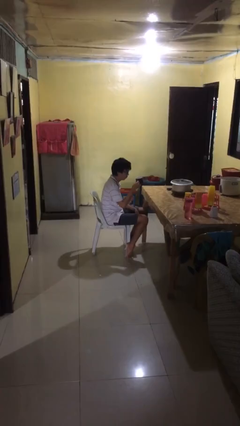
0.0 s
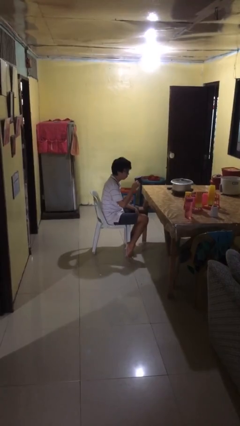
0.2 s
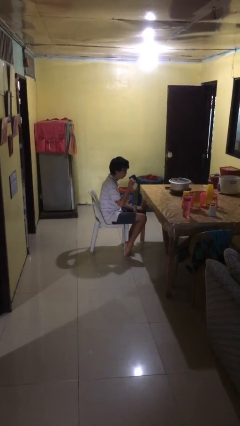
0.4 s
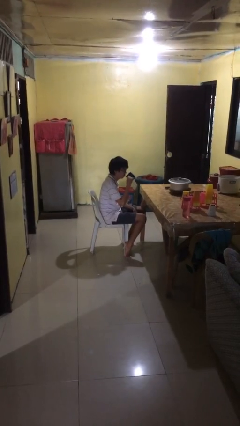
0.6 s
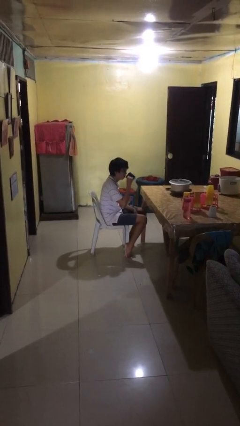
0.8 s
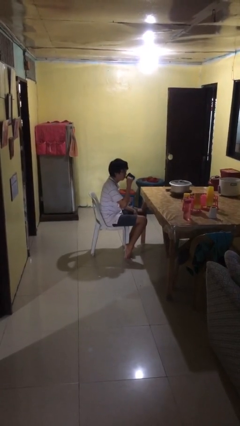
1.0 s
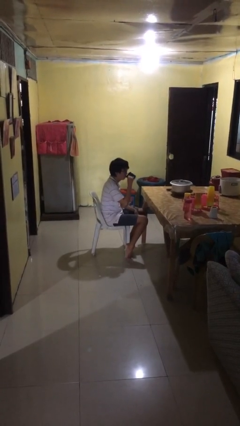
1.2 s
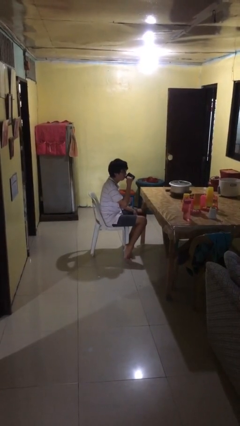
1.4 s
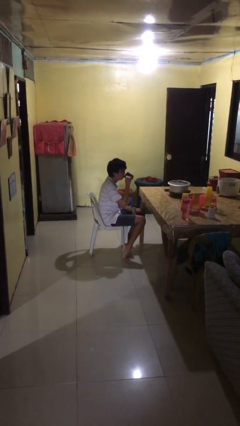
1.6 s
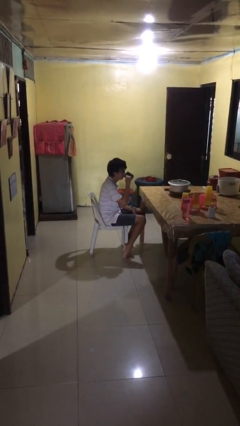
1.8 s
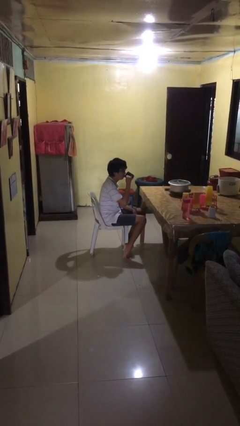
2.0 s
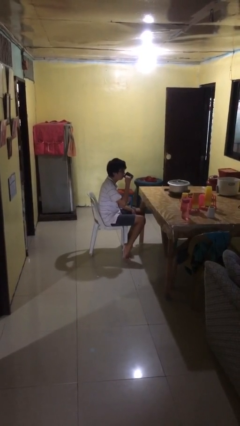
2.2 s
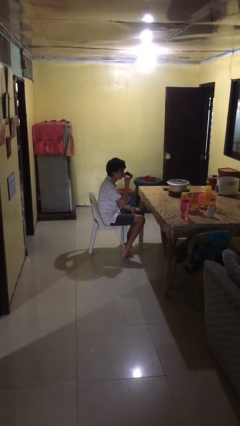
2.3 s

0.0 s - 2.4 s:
person drinks from mug

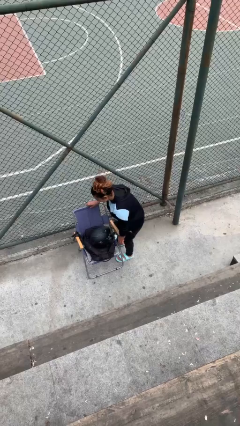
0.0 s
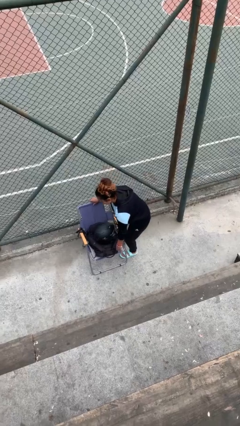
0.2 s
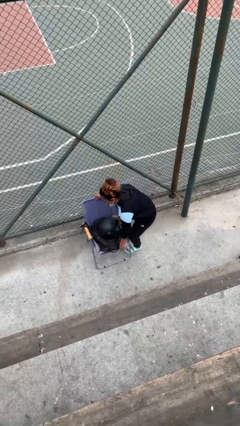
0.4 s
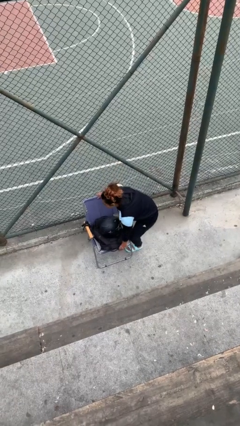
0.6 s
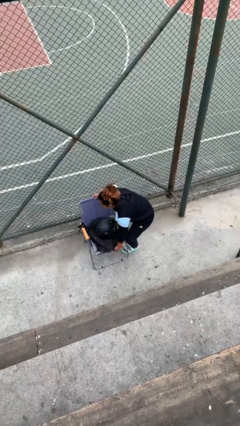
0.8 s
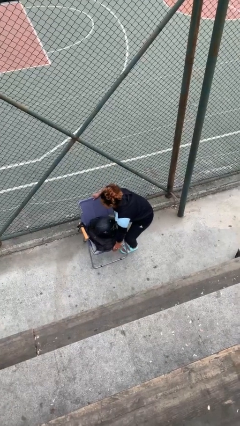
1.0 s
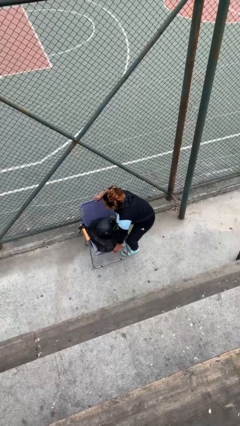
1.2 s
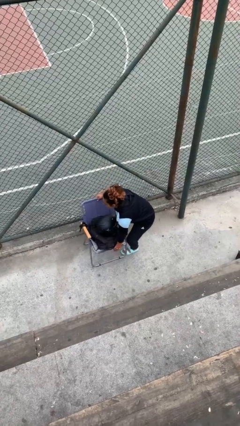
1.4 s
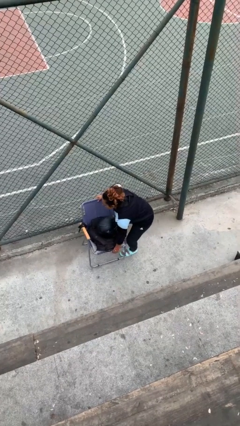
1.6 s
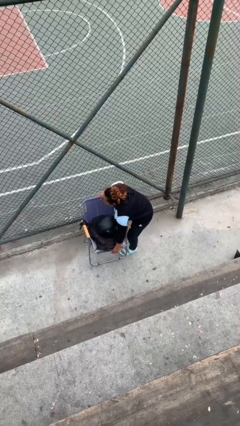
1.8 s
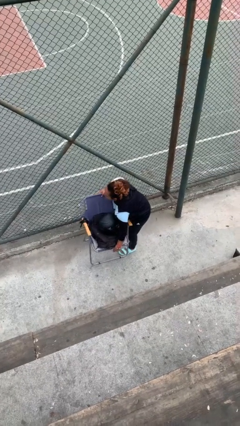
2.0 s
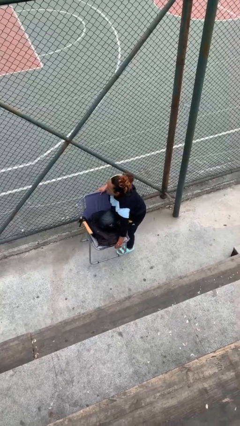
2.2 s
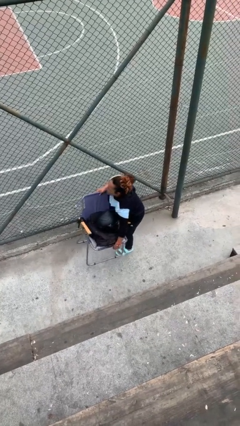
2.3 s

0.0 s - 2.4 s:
person picks up object from floor

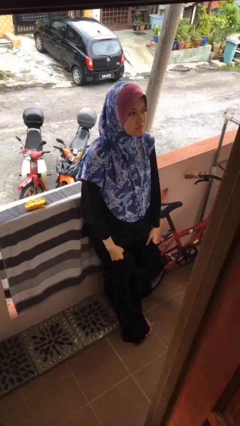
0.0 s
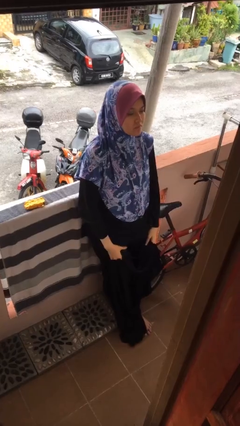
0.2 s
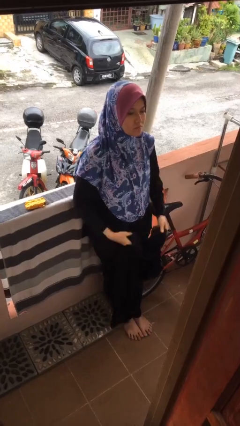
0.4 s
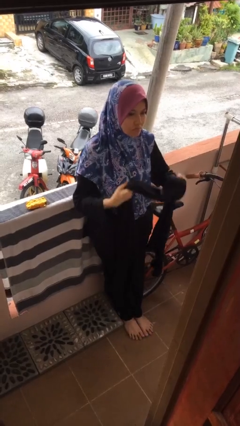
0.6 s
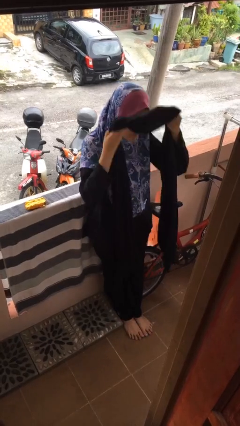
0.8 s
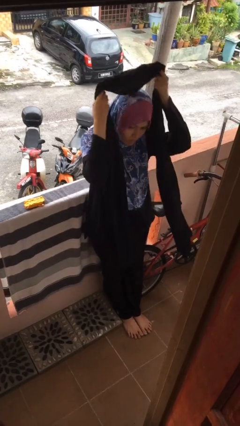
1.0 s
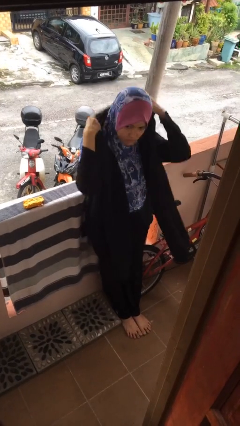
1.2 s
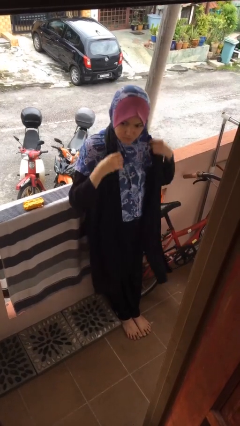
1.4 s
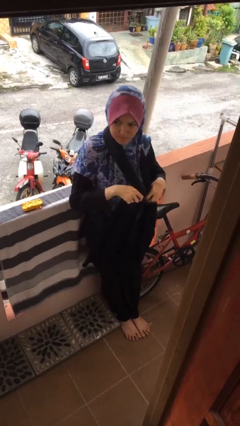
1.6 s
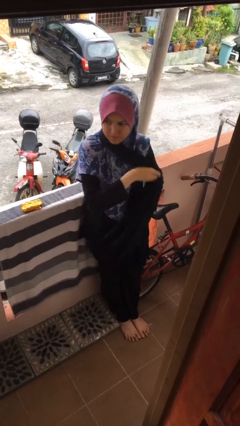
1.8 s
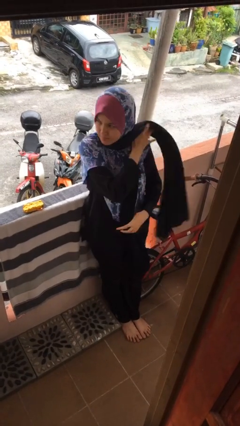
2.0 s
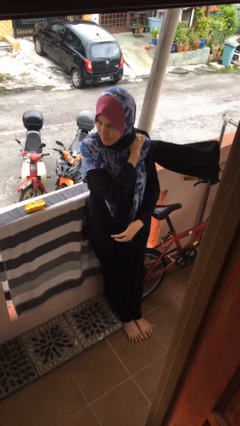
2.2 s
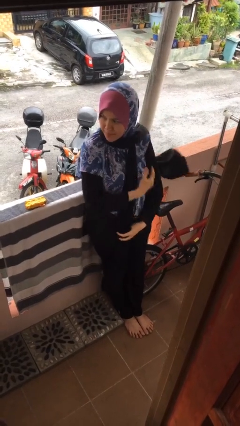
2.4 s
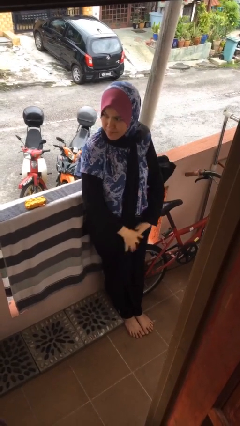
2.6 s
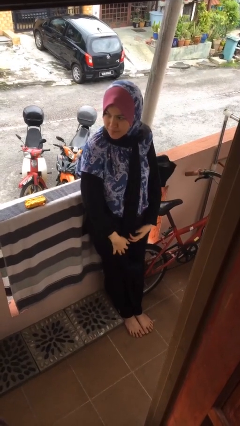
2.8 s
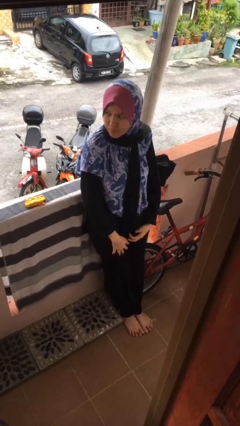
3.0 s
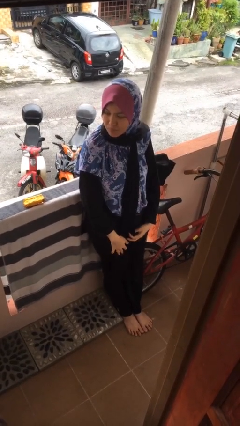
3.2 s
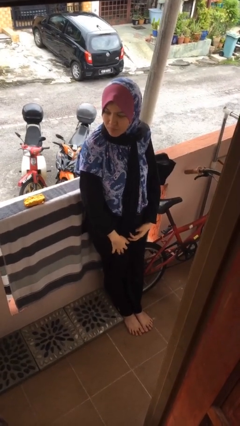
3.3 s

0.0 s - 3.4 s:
person puts on scarf

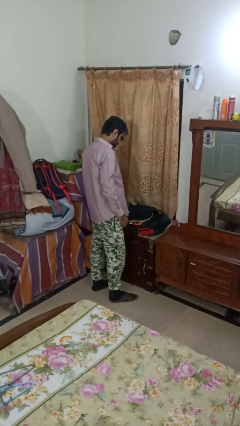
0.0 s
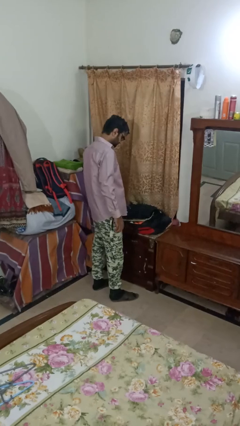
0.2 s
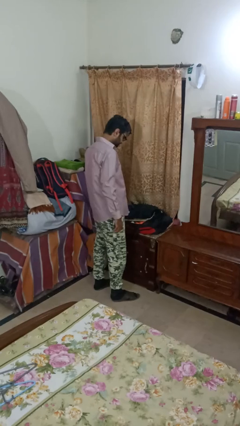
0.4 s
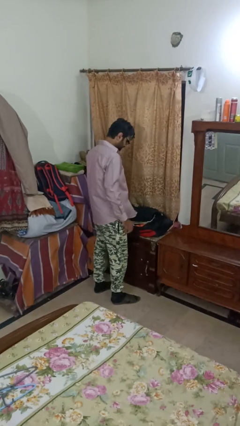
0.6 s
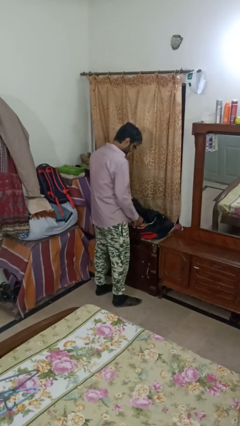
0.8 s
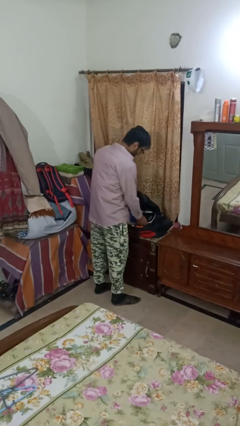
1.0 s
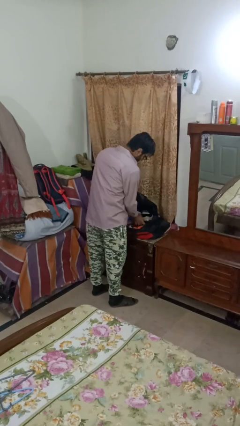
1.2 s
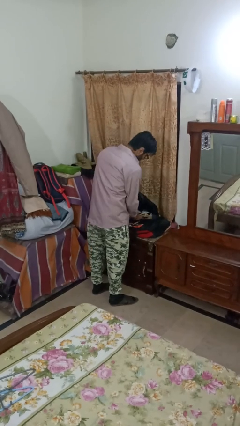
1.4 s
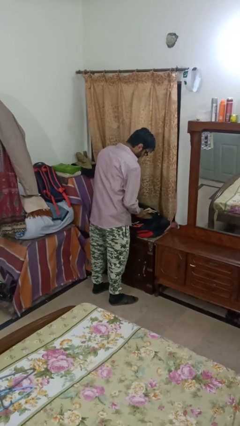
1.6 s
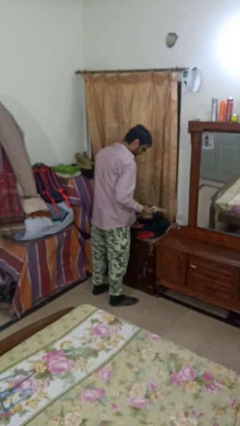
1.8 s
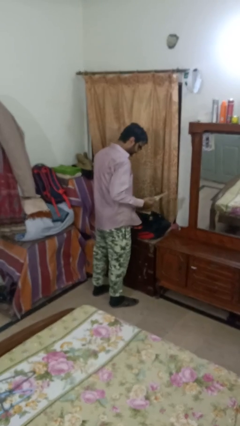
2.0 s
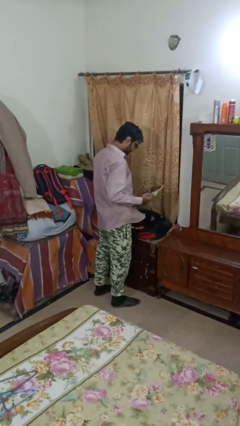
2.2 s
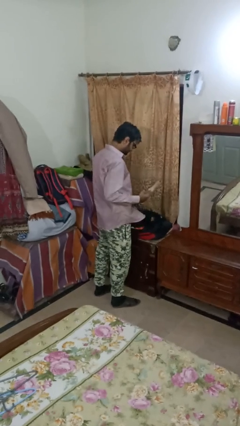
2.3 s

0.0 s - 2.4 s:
person takes object from bag

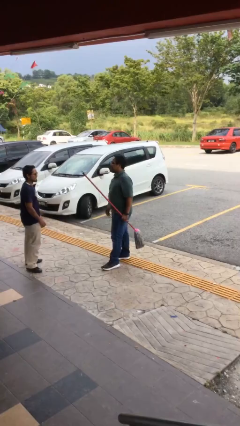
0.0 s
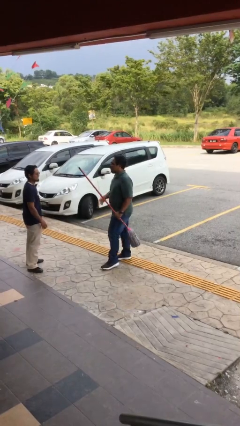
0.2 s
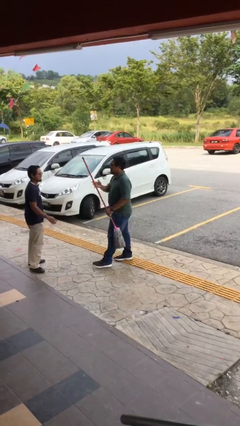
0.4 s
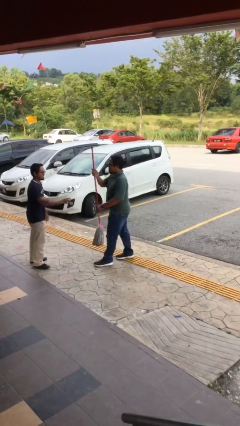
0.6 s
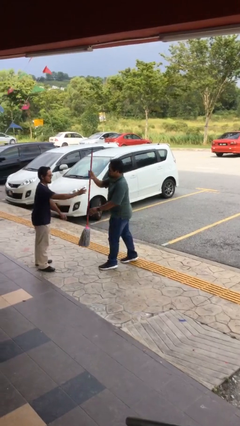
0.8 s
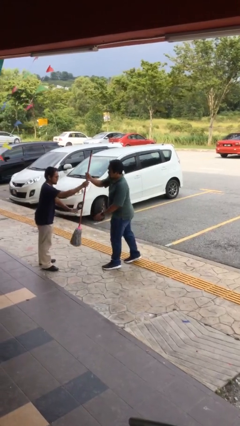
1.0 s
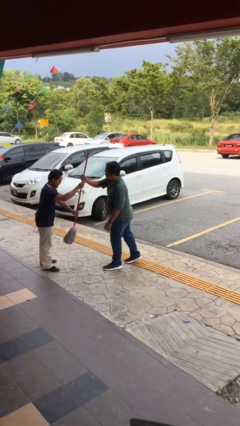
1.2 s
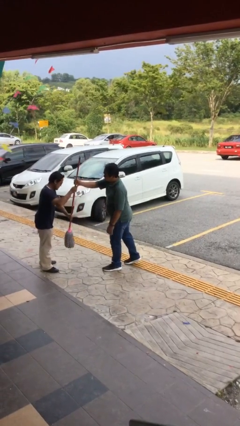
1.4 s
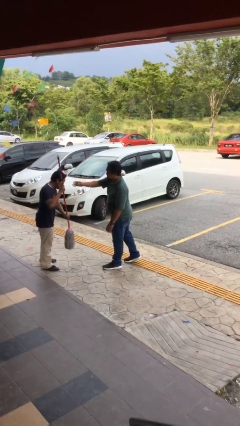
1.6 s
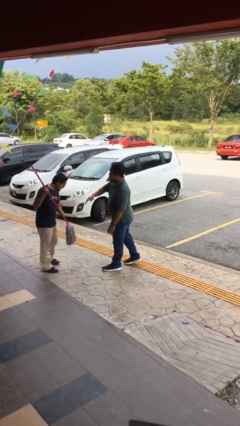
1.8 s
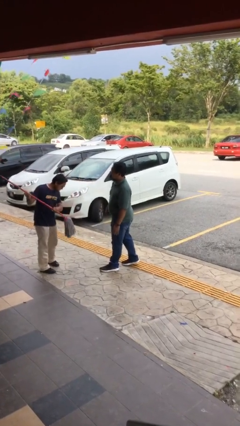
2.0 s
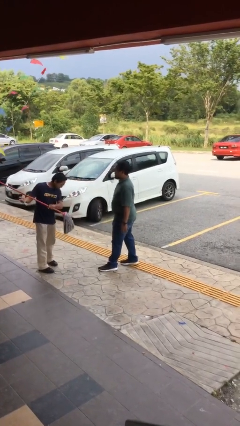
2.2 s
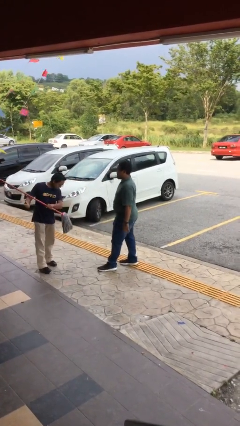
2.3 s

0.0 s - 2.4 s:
person transfers object to person

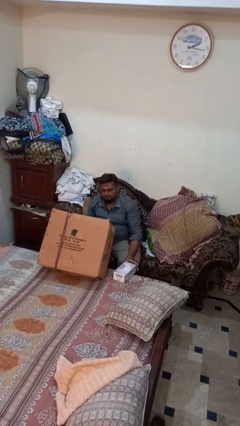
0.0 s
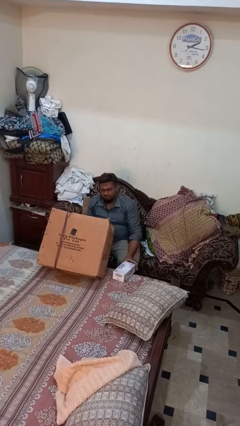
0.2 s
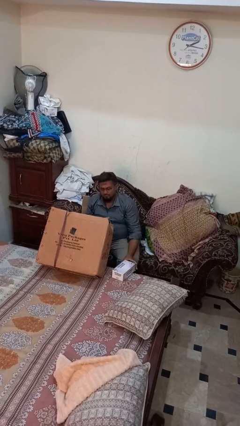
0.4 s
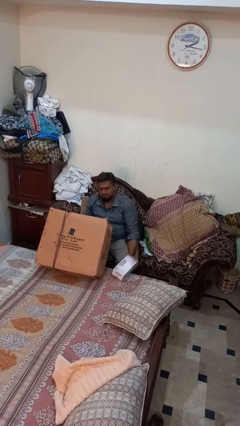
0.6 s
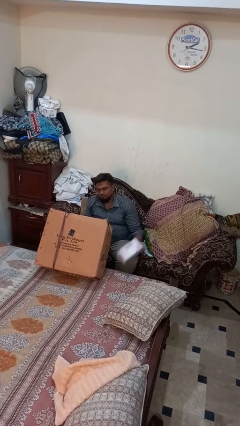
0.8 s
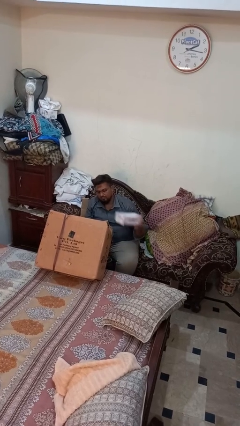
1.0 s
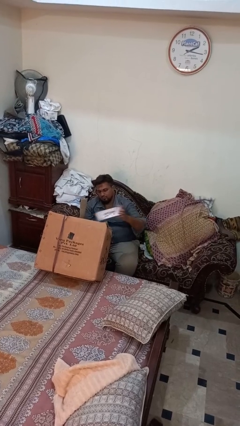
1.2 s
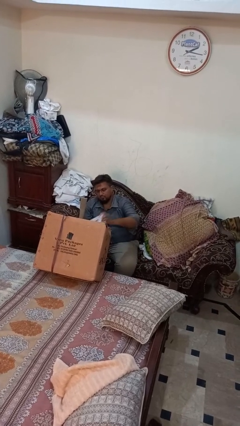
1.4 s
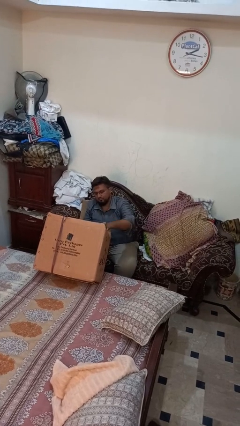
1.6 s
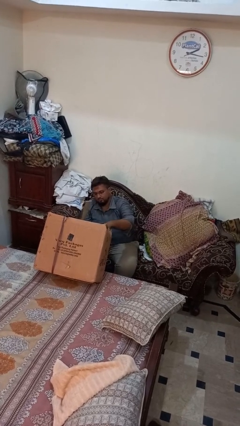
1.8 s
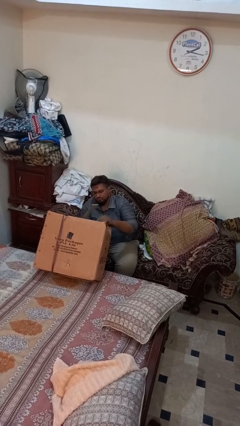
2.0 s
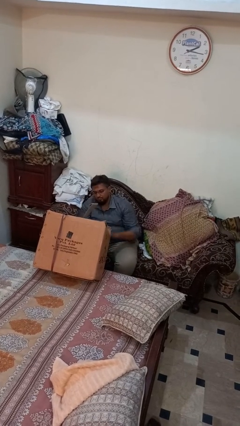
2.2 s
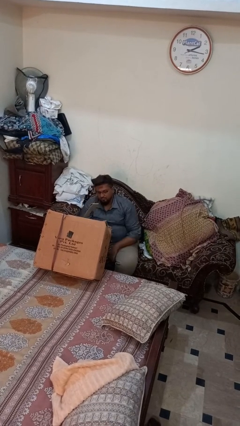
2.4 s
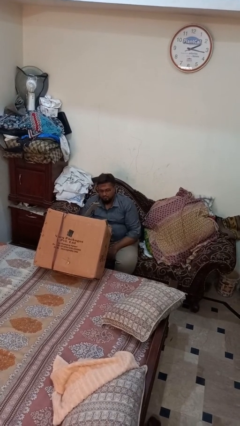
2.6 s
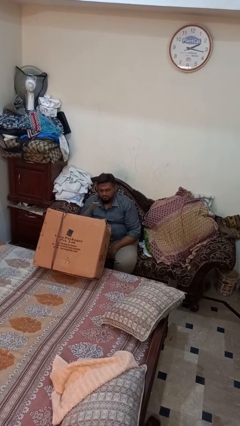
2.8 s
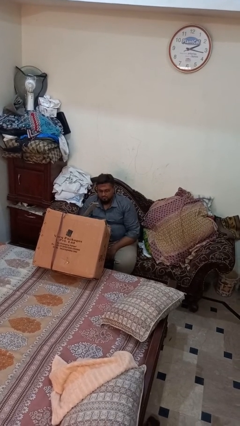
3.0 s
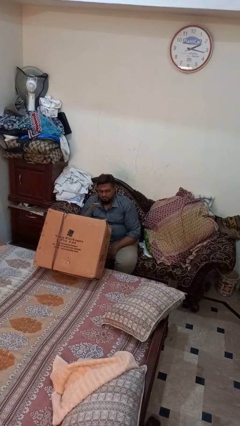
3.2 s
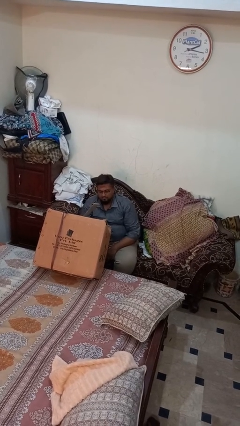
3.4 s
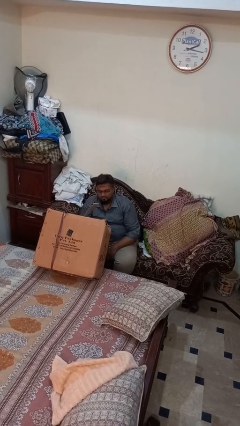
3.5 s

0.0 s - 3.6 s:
person puts object into box

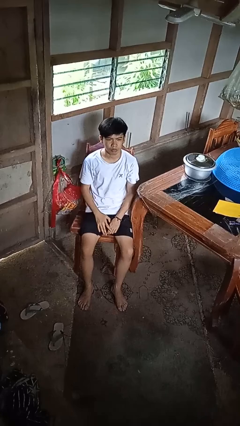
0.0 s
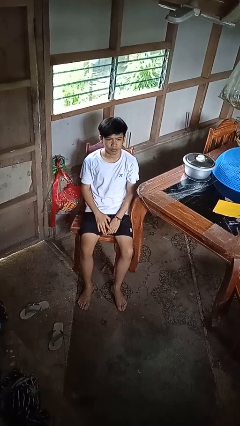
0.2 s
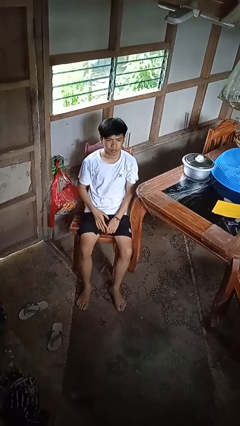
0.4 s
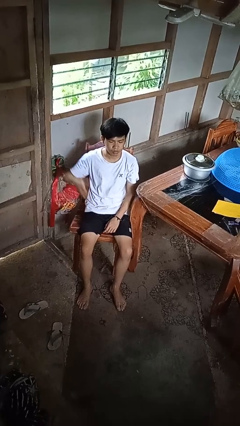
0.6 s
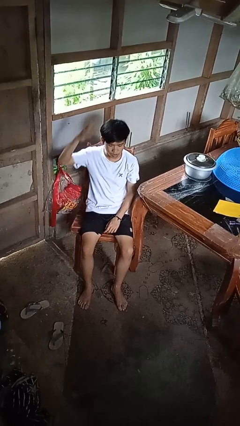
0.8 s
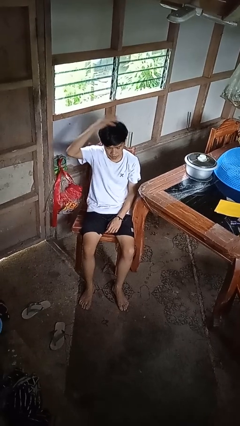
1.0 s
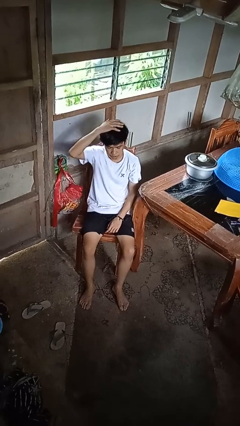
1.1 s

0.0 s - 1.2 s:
person pats head
